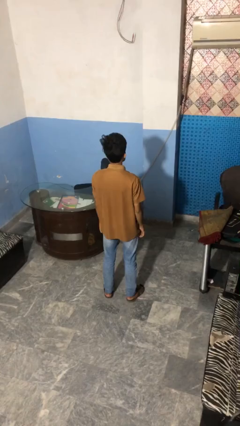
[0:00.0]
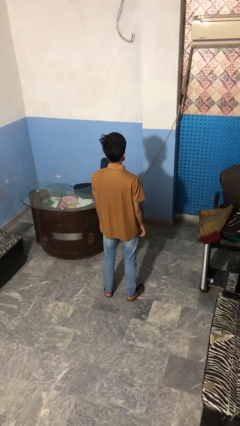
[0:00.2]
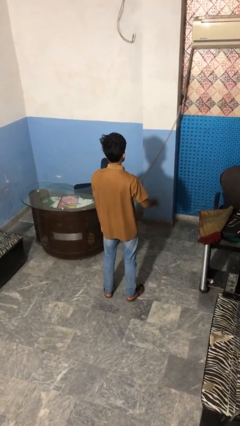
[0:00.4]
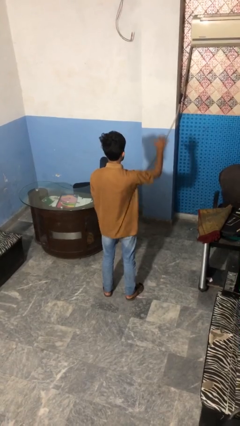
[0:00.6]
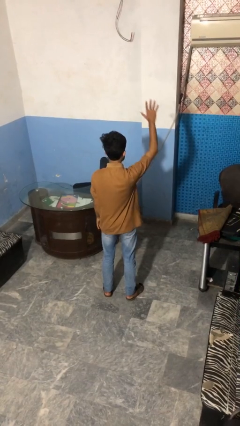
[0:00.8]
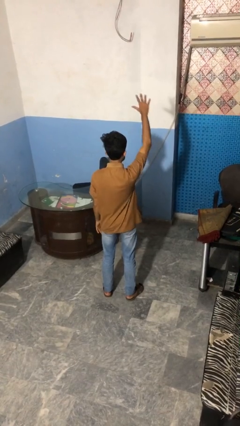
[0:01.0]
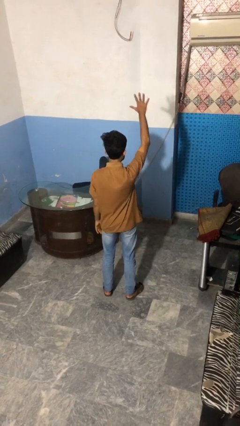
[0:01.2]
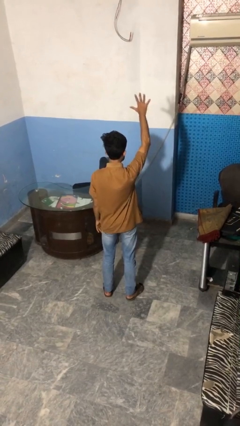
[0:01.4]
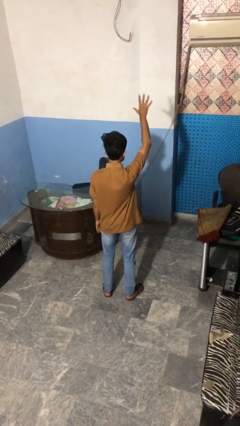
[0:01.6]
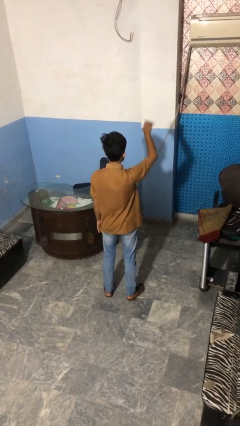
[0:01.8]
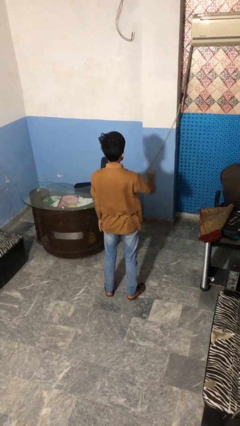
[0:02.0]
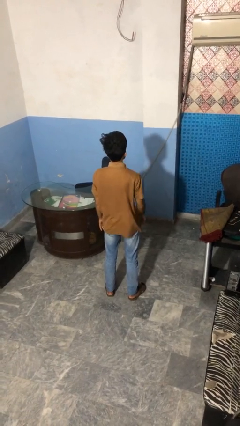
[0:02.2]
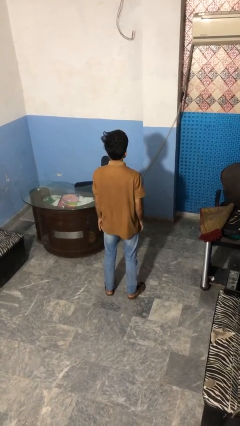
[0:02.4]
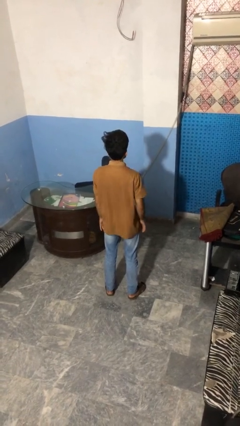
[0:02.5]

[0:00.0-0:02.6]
person gestures number five

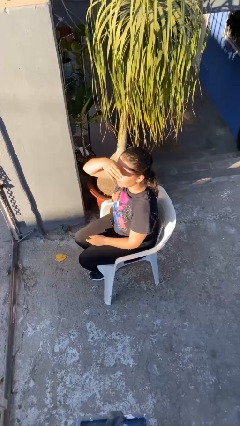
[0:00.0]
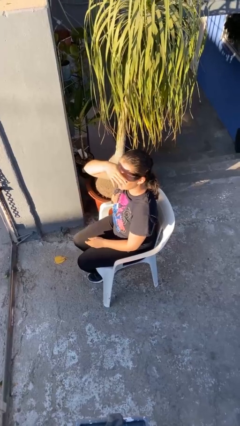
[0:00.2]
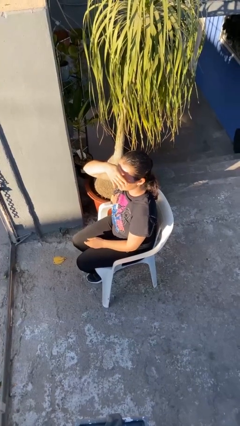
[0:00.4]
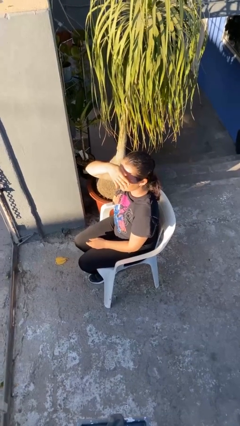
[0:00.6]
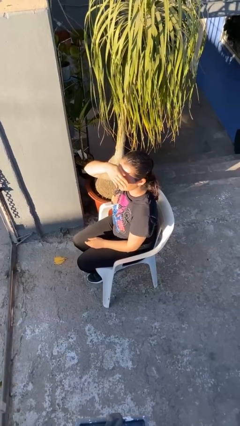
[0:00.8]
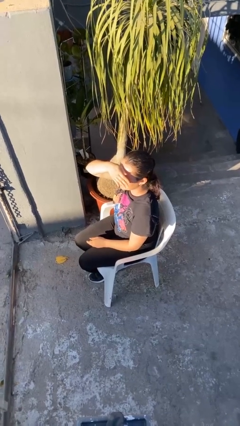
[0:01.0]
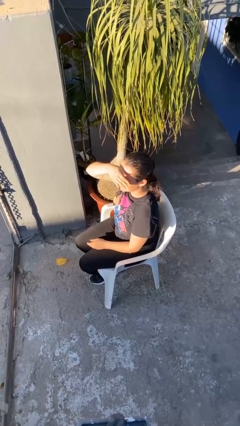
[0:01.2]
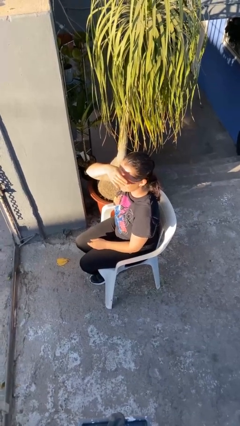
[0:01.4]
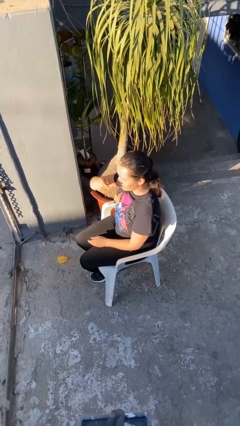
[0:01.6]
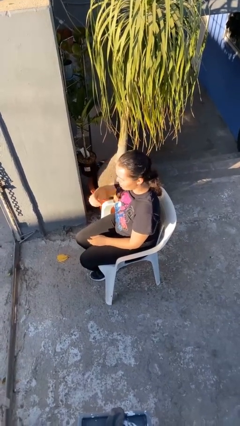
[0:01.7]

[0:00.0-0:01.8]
person shades eyes

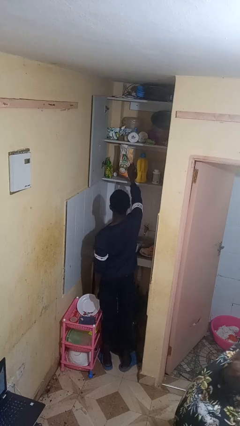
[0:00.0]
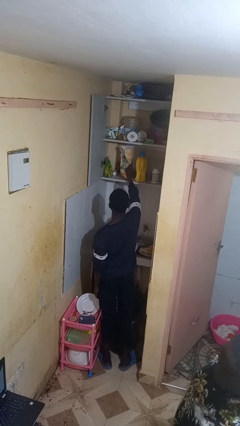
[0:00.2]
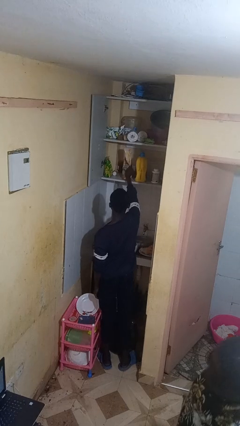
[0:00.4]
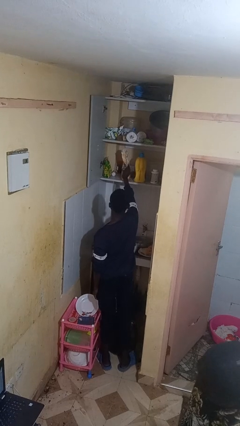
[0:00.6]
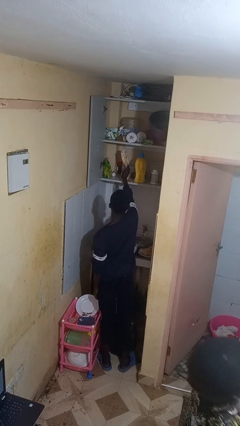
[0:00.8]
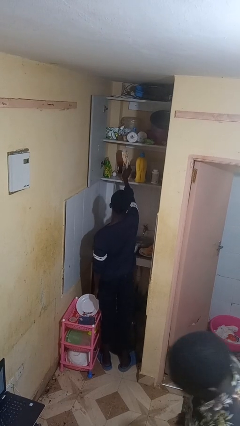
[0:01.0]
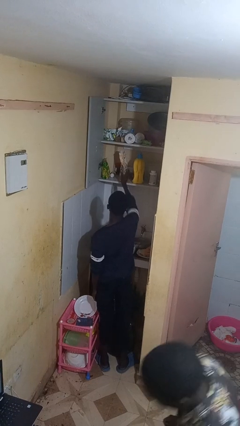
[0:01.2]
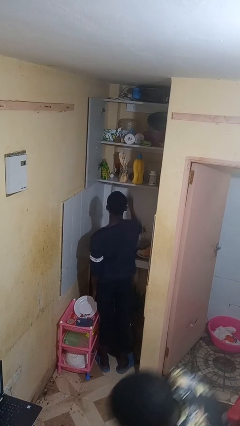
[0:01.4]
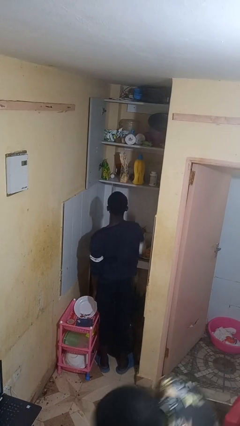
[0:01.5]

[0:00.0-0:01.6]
person puts object in cabinet

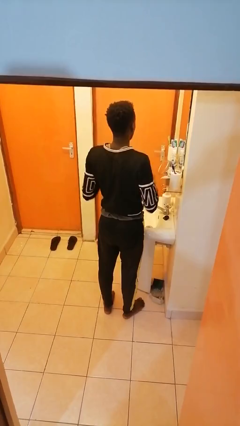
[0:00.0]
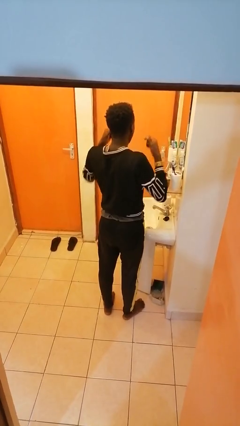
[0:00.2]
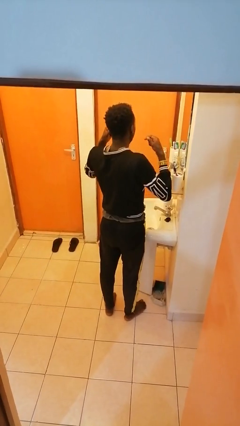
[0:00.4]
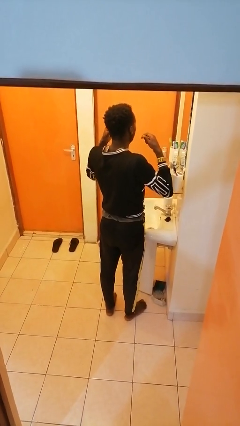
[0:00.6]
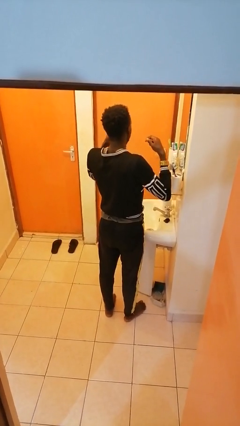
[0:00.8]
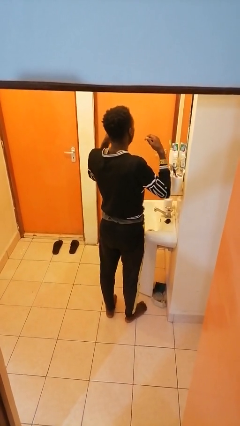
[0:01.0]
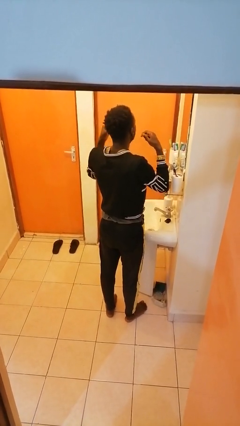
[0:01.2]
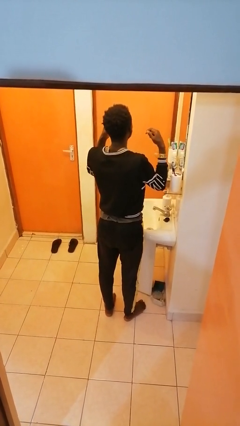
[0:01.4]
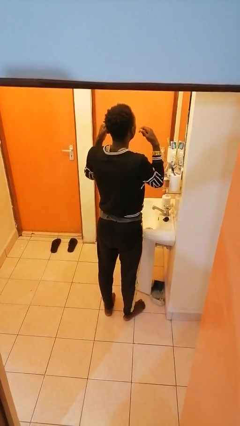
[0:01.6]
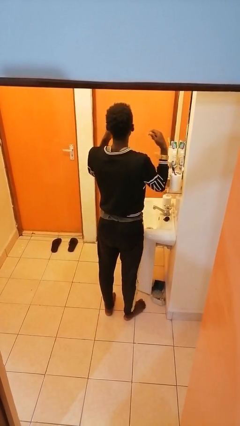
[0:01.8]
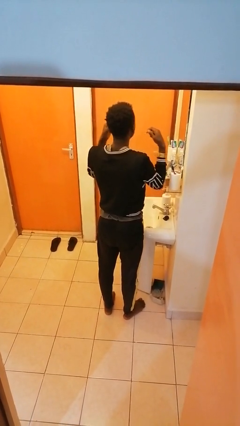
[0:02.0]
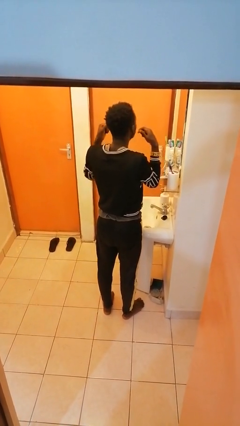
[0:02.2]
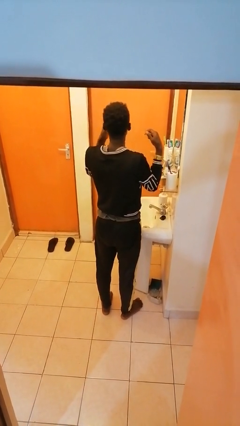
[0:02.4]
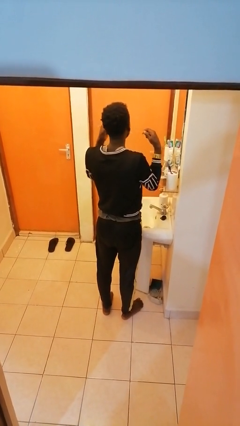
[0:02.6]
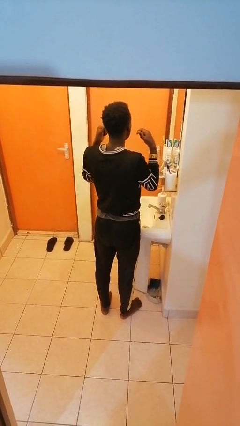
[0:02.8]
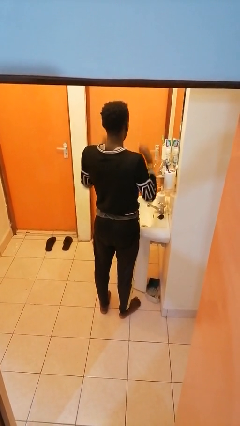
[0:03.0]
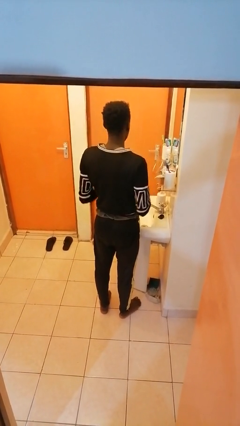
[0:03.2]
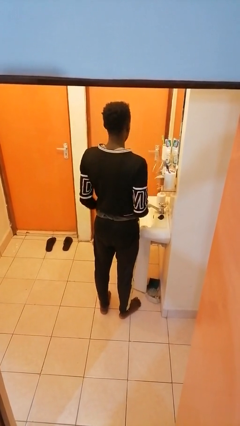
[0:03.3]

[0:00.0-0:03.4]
person flosses

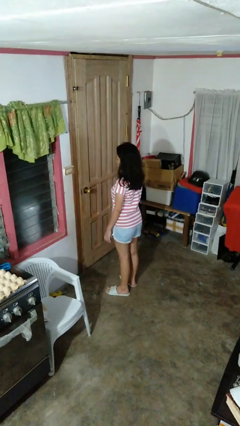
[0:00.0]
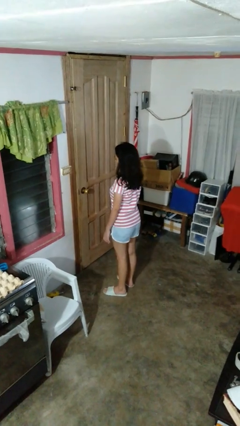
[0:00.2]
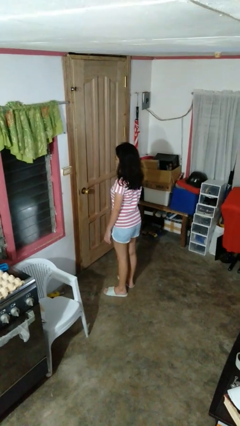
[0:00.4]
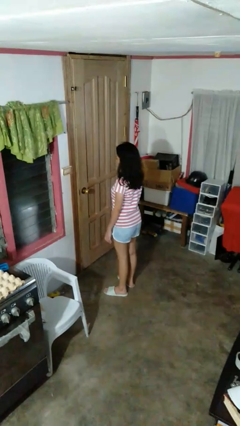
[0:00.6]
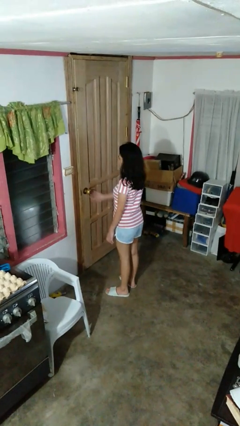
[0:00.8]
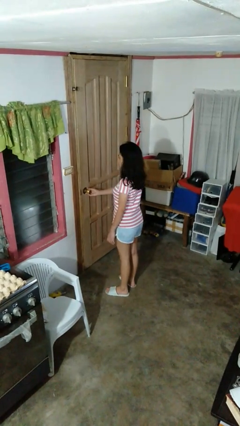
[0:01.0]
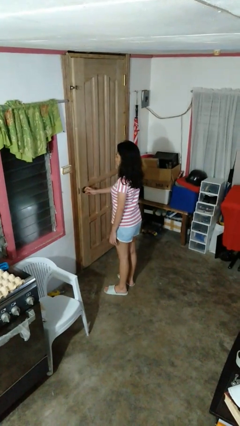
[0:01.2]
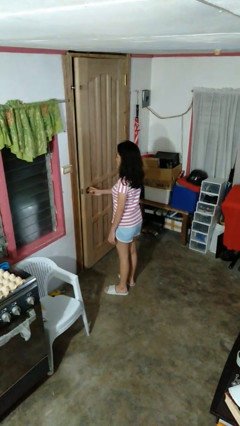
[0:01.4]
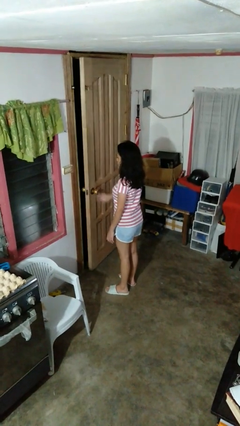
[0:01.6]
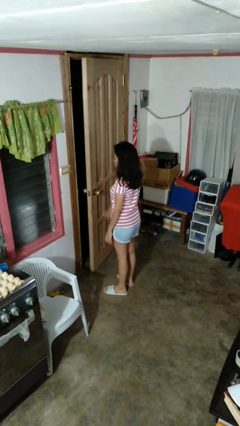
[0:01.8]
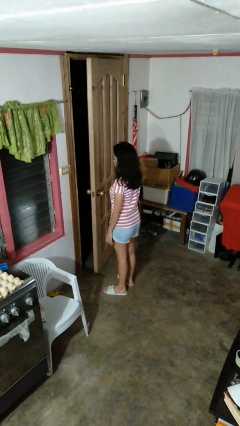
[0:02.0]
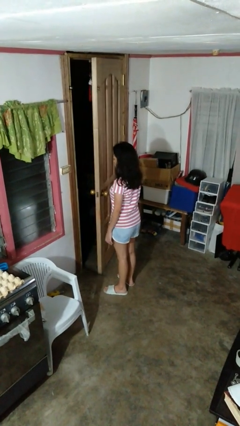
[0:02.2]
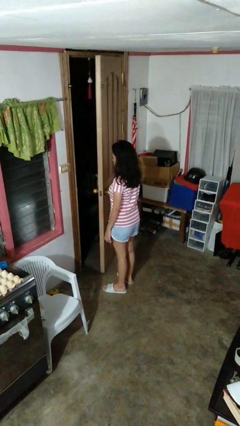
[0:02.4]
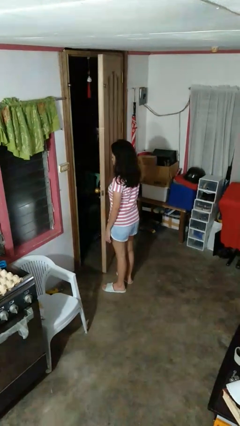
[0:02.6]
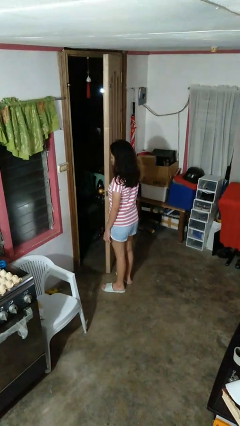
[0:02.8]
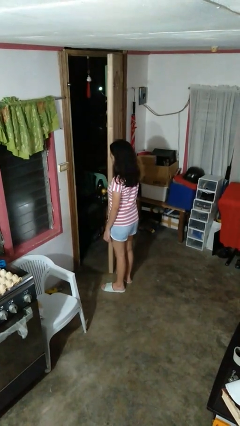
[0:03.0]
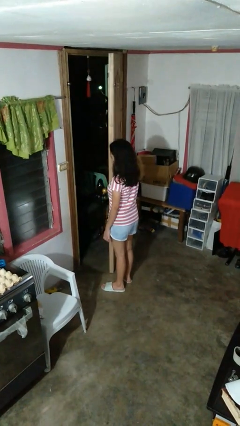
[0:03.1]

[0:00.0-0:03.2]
person opens facility door

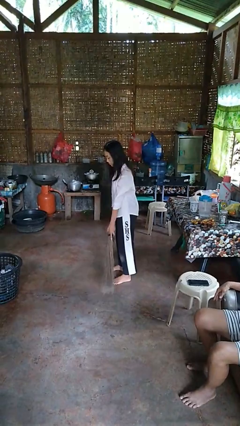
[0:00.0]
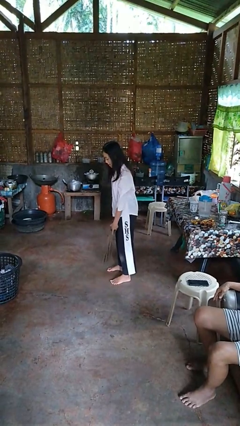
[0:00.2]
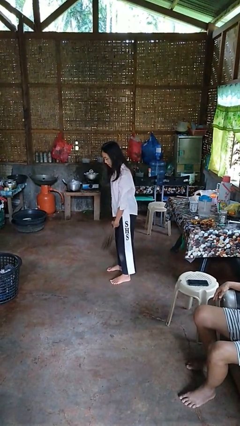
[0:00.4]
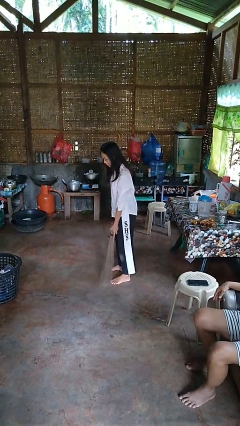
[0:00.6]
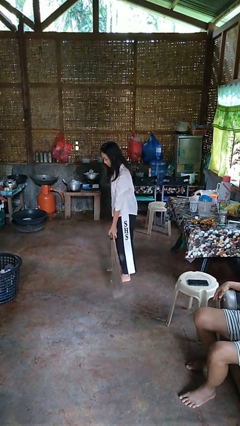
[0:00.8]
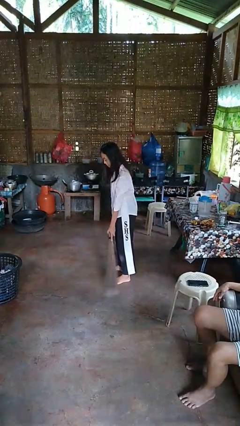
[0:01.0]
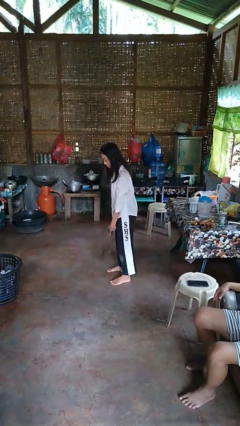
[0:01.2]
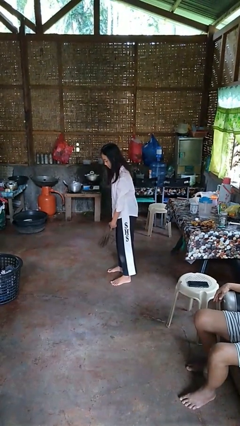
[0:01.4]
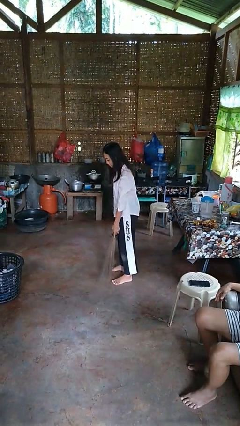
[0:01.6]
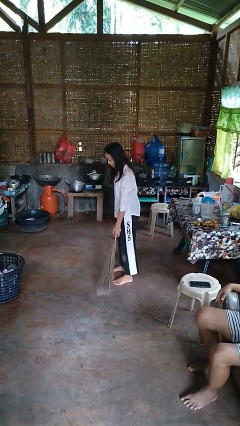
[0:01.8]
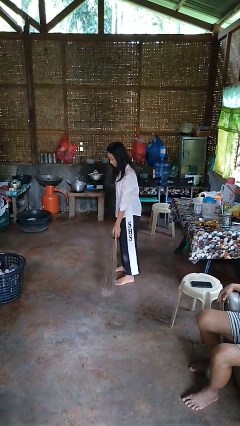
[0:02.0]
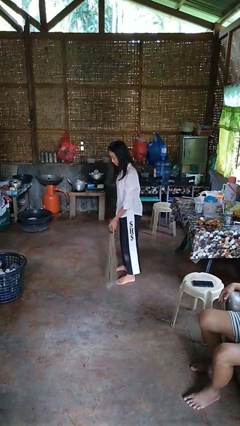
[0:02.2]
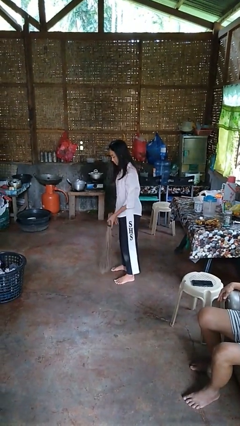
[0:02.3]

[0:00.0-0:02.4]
person sweeps floor

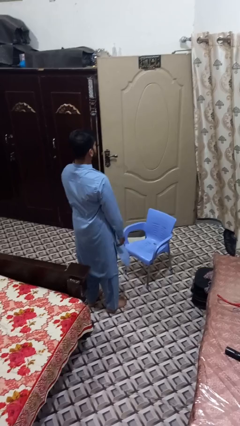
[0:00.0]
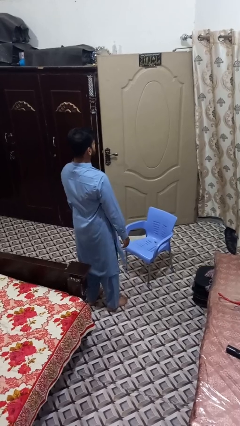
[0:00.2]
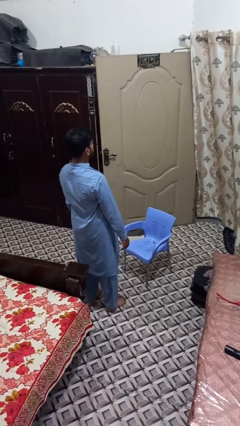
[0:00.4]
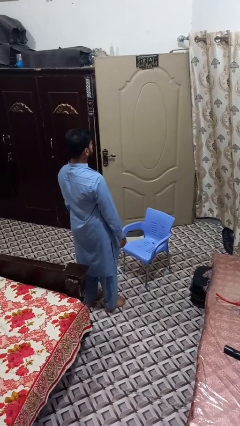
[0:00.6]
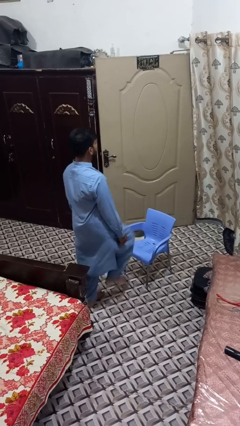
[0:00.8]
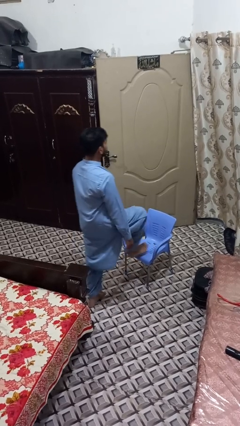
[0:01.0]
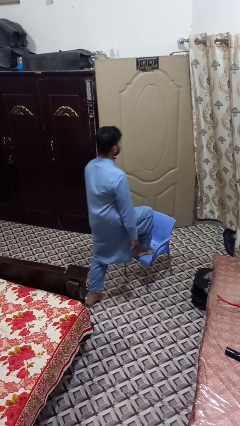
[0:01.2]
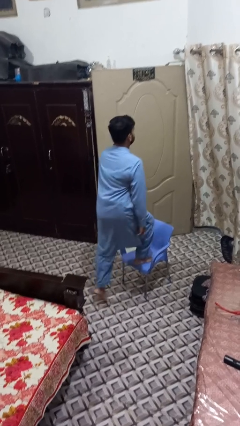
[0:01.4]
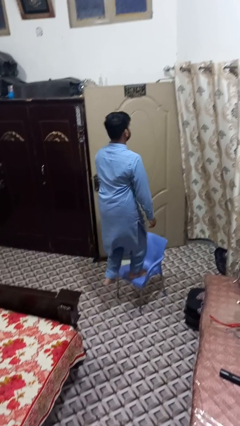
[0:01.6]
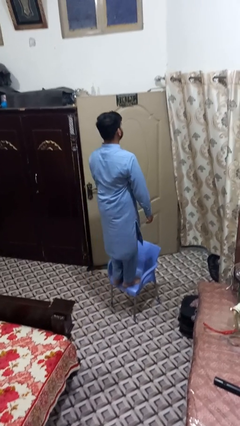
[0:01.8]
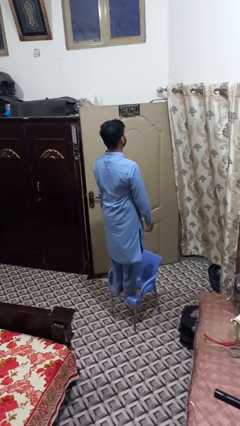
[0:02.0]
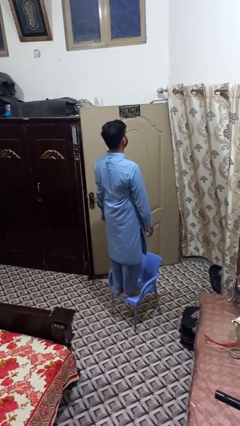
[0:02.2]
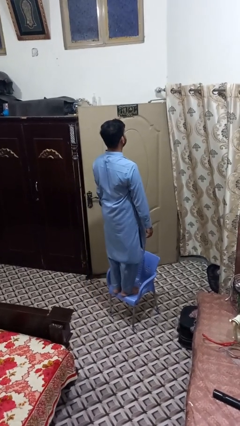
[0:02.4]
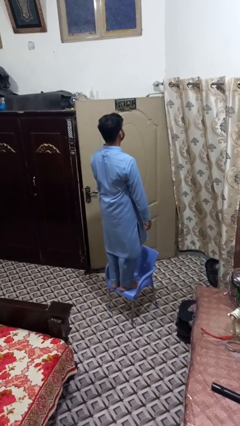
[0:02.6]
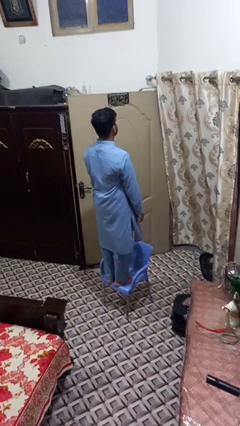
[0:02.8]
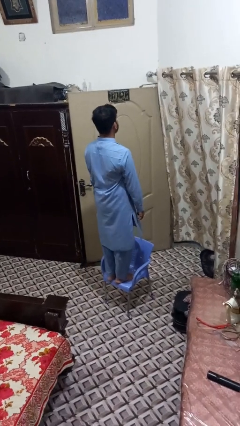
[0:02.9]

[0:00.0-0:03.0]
person climbs on chair
